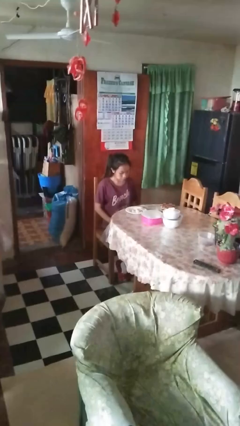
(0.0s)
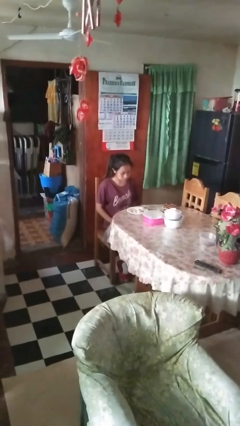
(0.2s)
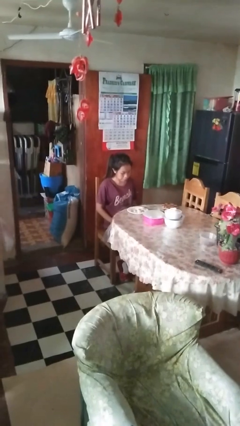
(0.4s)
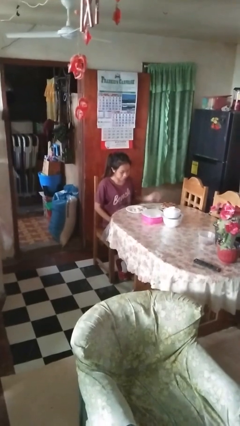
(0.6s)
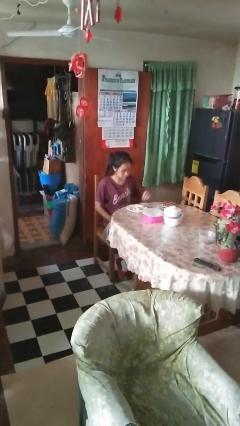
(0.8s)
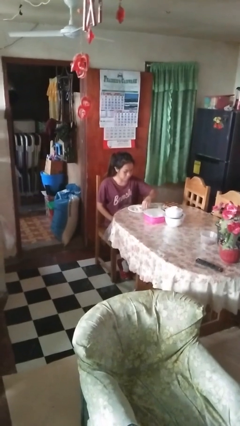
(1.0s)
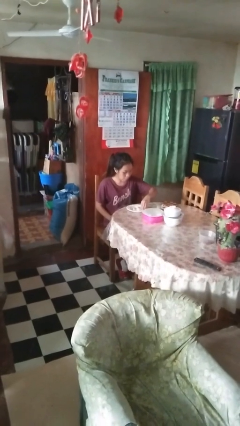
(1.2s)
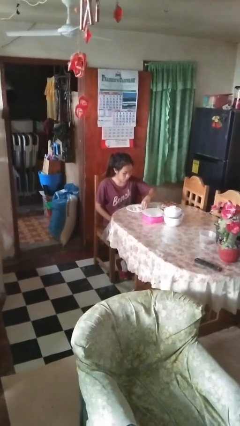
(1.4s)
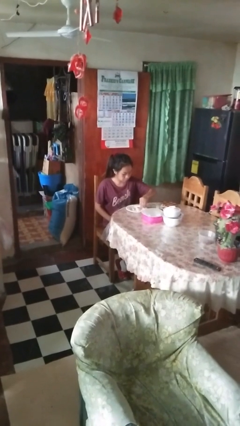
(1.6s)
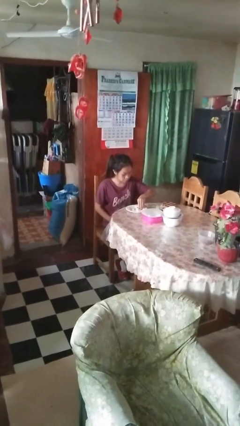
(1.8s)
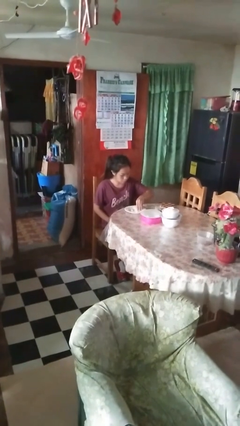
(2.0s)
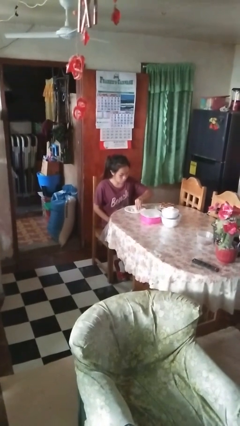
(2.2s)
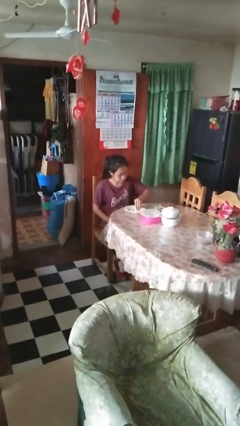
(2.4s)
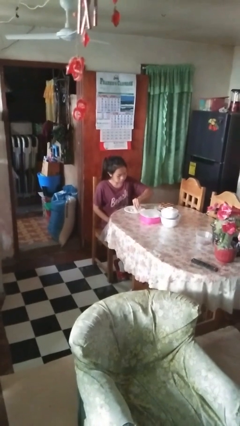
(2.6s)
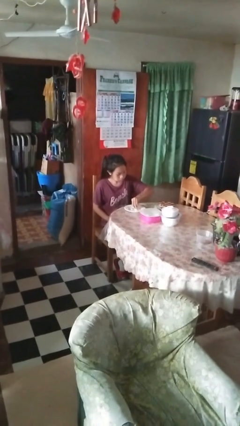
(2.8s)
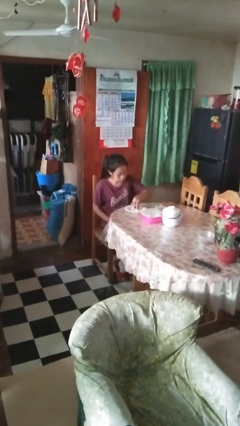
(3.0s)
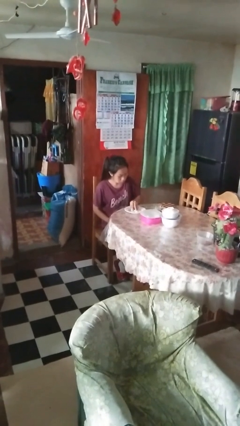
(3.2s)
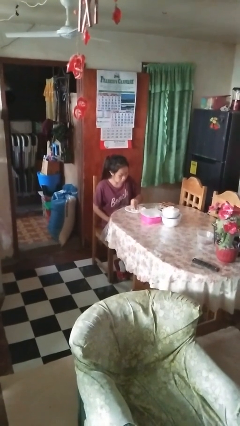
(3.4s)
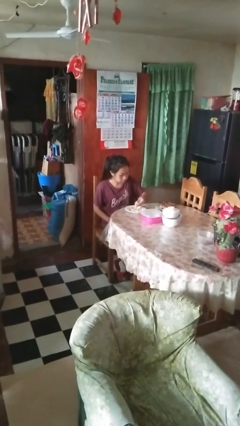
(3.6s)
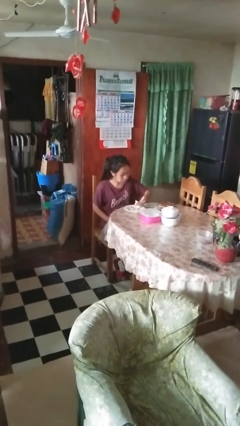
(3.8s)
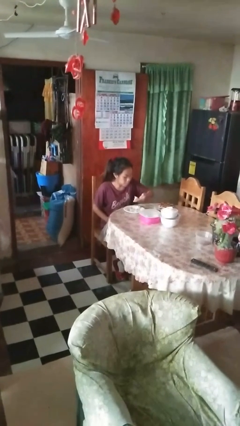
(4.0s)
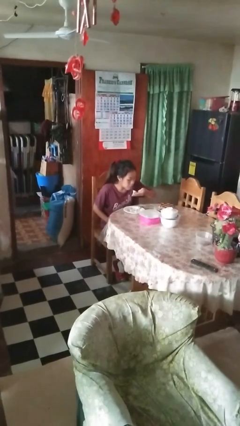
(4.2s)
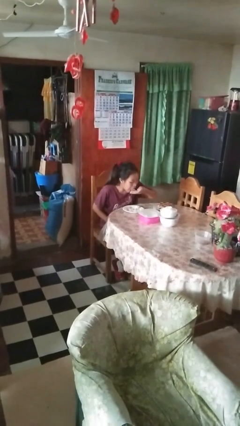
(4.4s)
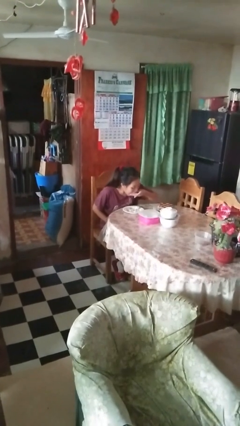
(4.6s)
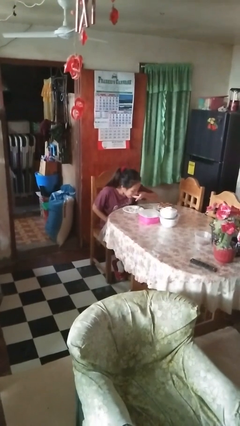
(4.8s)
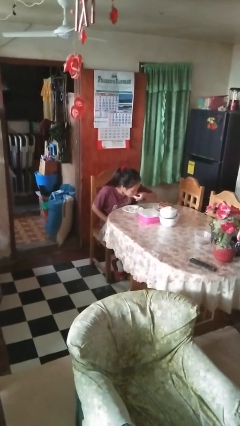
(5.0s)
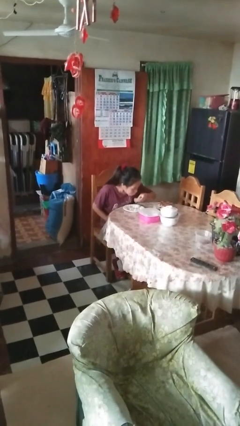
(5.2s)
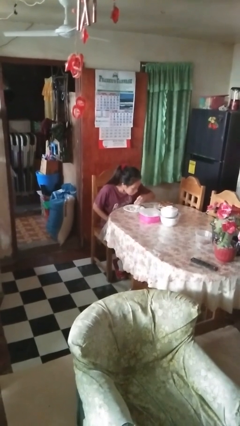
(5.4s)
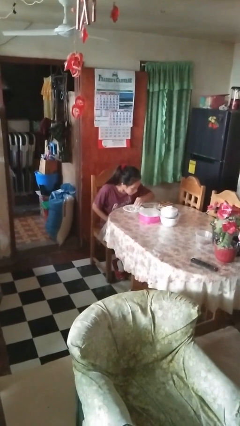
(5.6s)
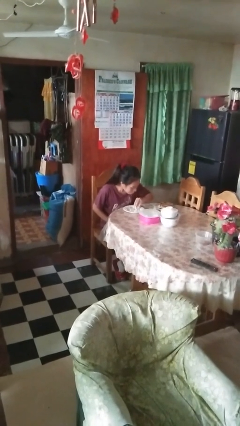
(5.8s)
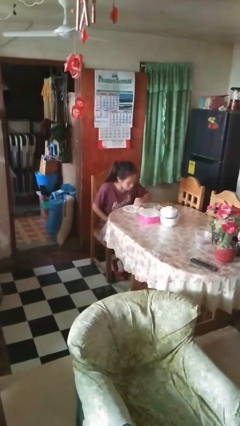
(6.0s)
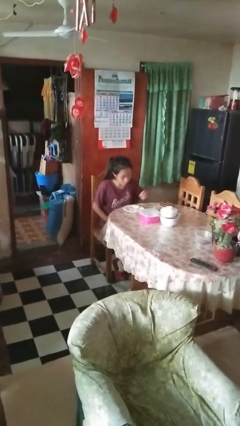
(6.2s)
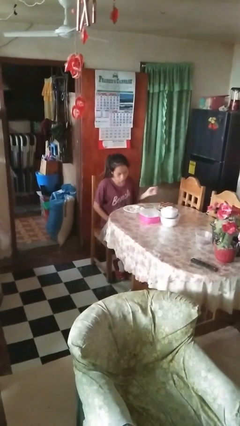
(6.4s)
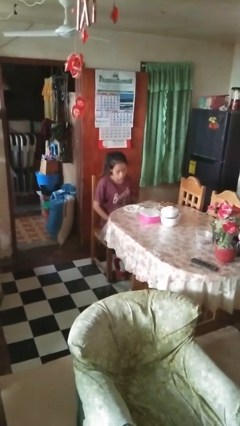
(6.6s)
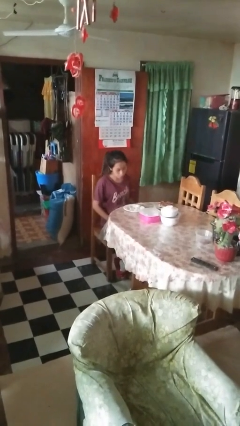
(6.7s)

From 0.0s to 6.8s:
person eats with hands

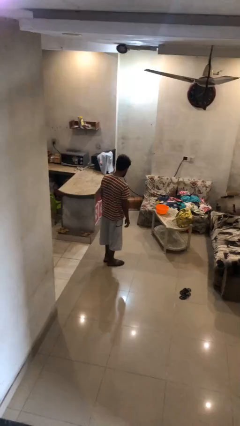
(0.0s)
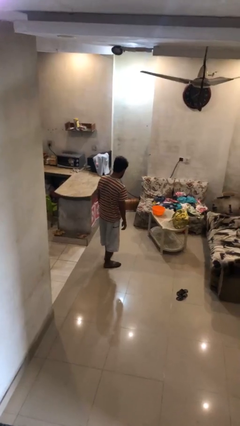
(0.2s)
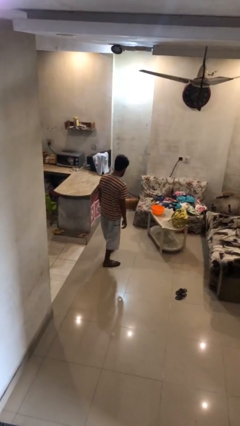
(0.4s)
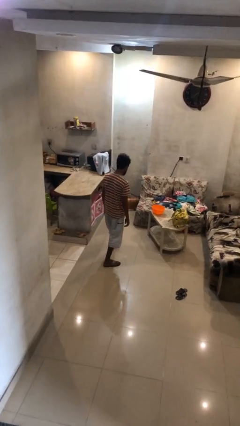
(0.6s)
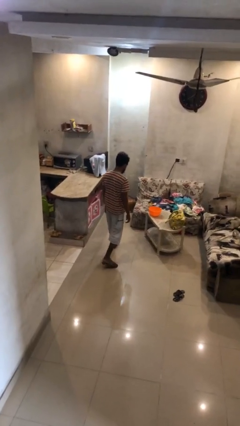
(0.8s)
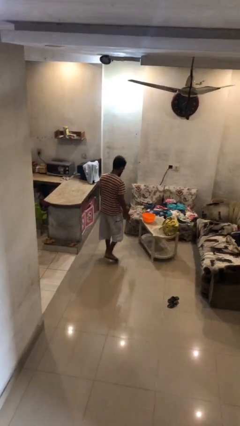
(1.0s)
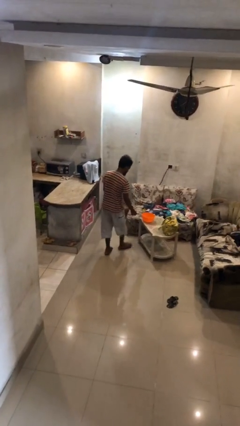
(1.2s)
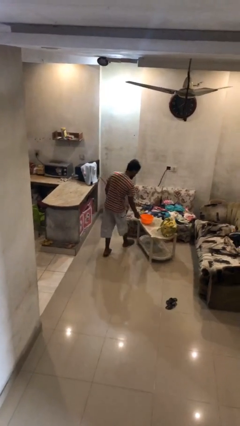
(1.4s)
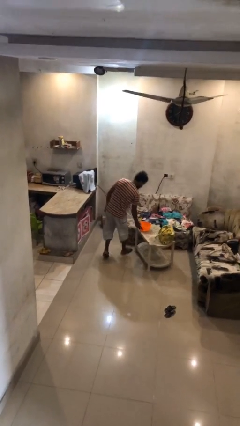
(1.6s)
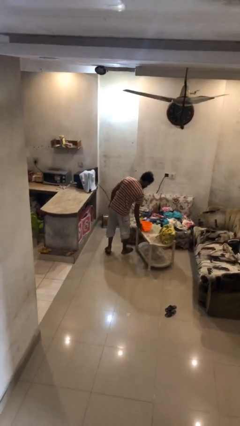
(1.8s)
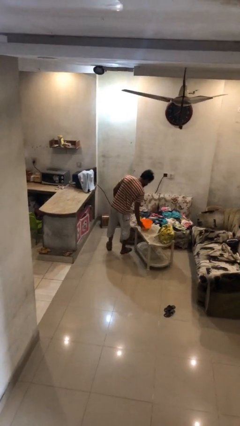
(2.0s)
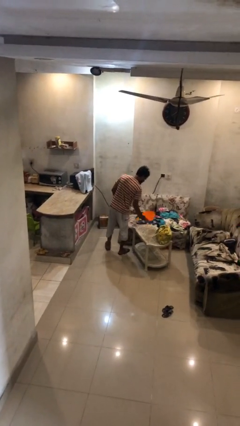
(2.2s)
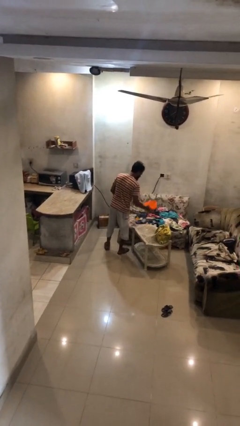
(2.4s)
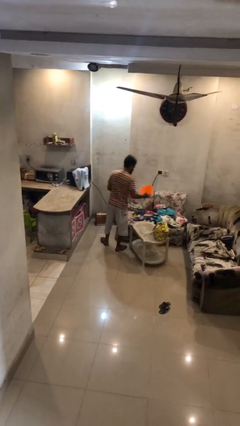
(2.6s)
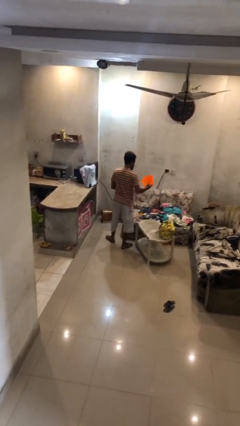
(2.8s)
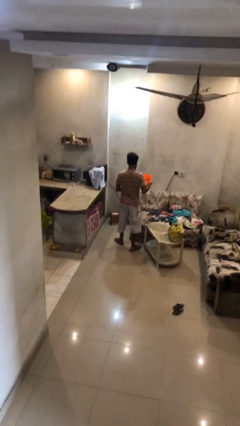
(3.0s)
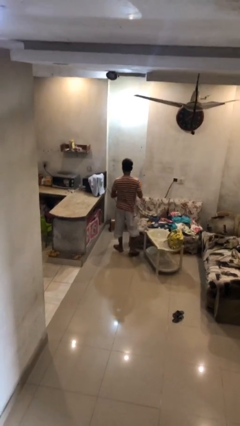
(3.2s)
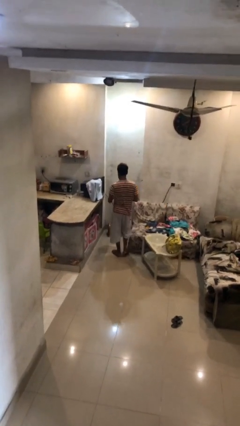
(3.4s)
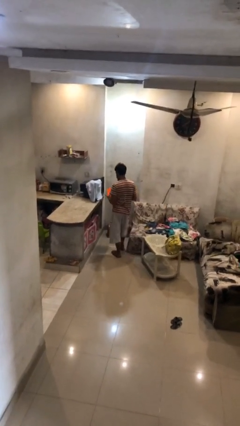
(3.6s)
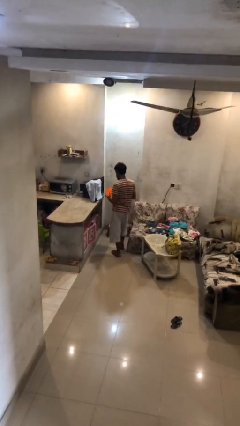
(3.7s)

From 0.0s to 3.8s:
person picks up object from table

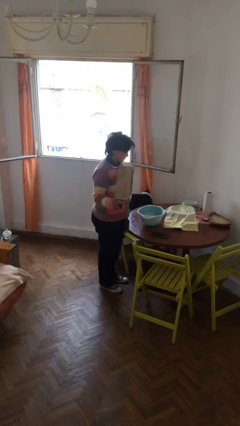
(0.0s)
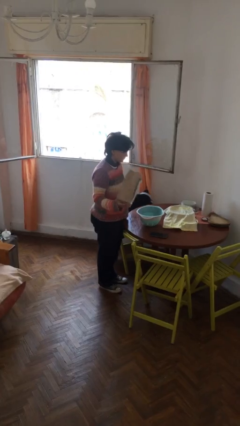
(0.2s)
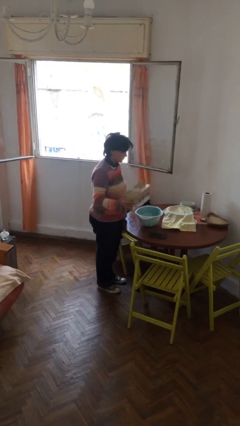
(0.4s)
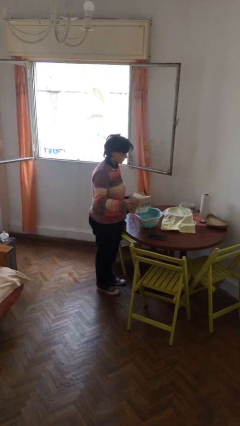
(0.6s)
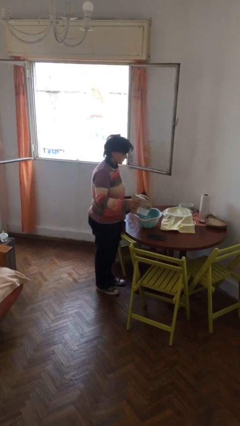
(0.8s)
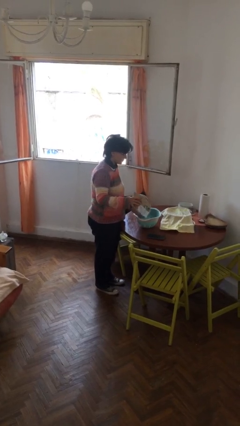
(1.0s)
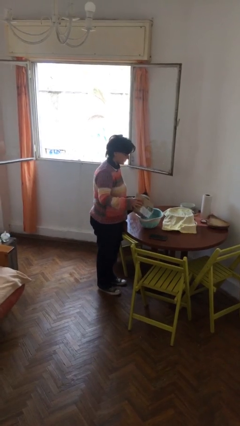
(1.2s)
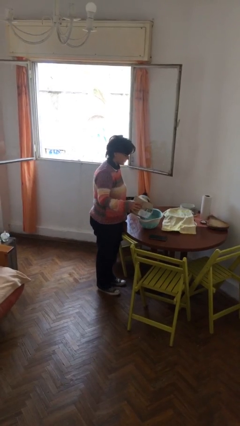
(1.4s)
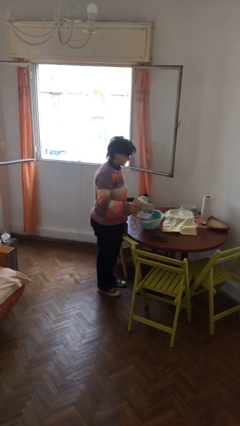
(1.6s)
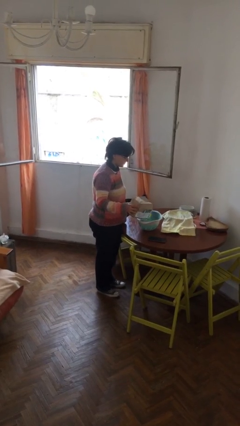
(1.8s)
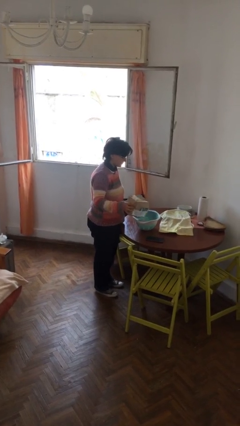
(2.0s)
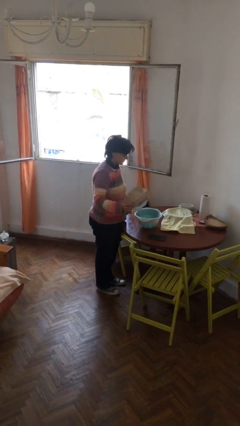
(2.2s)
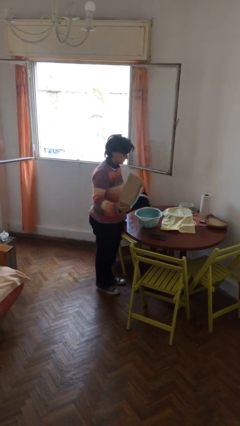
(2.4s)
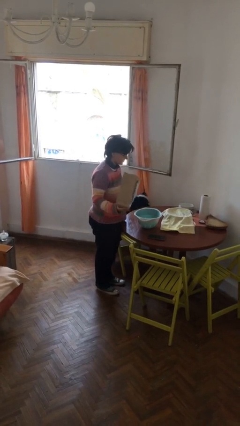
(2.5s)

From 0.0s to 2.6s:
person pours into bowl

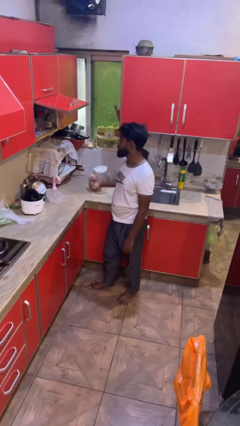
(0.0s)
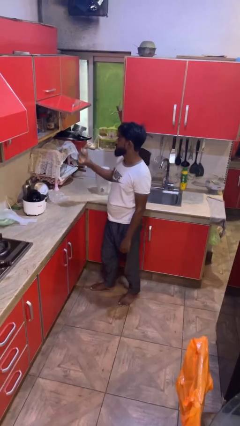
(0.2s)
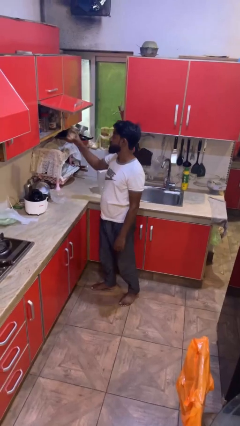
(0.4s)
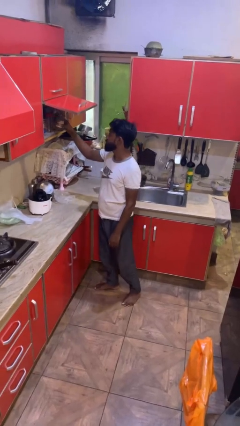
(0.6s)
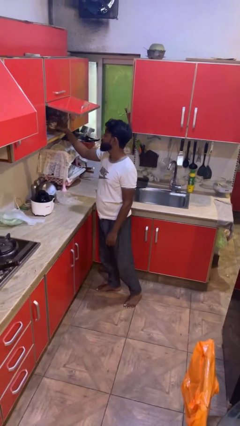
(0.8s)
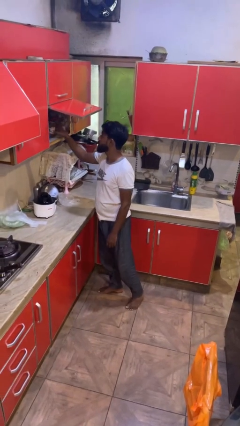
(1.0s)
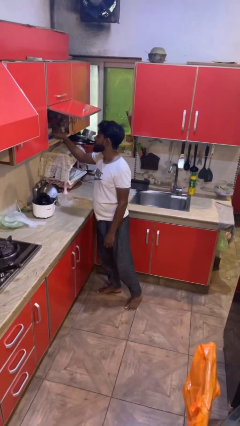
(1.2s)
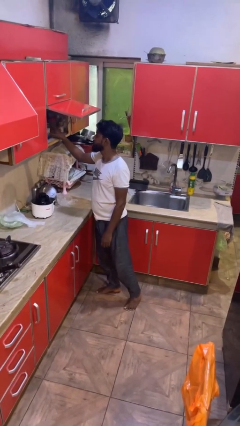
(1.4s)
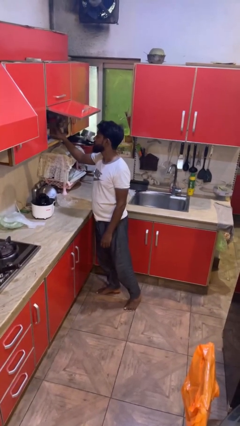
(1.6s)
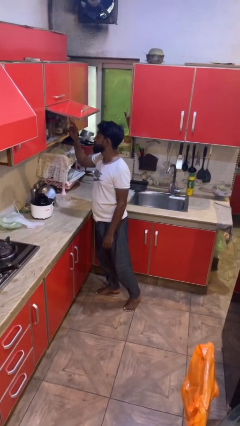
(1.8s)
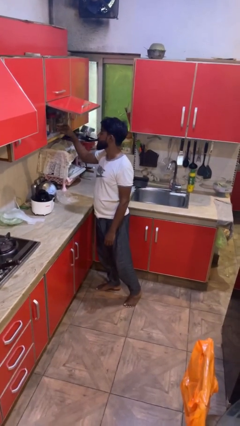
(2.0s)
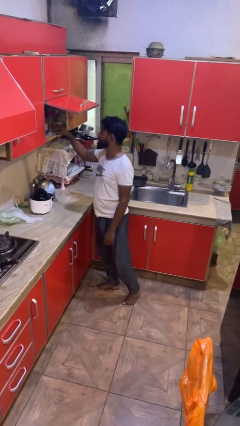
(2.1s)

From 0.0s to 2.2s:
person puts down object into cabinet

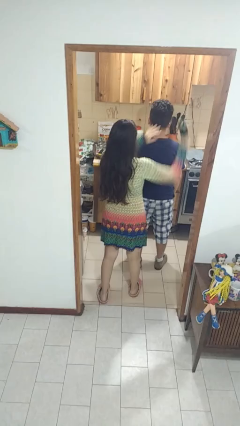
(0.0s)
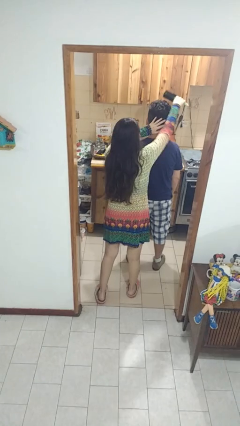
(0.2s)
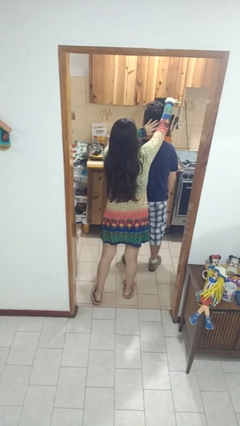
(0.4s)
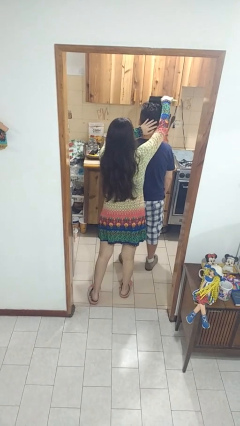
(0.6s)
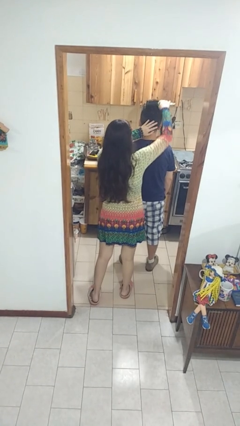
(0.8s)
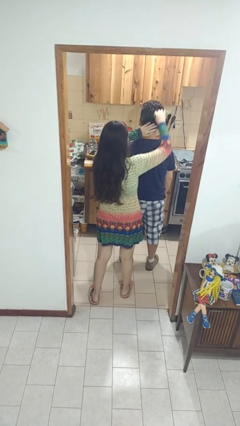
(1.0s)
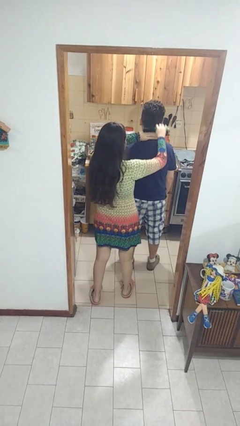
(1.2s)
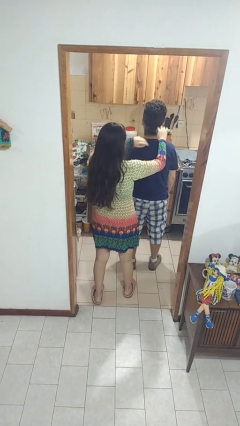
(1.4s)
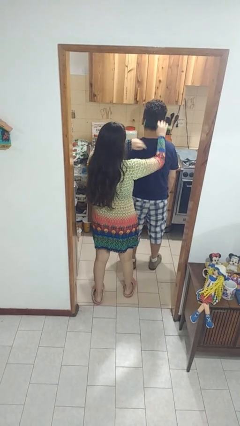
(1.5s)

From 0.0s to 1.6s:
person brushes hair of person

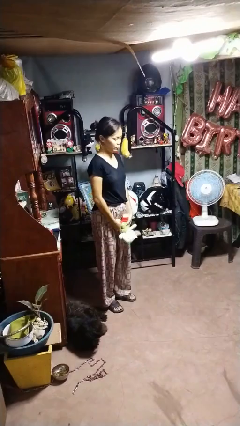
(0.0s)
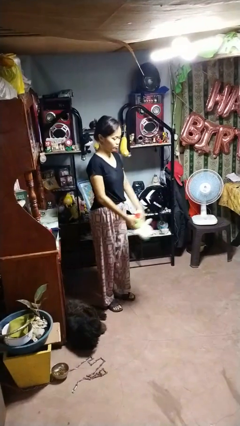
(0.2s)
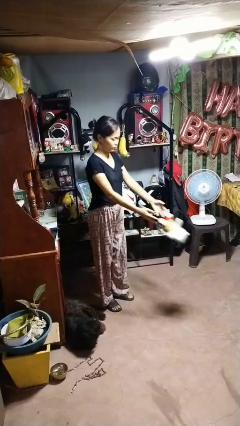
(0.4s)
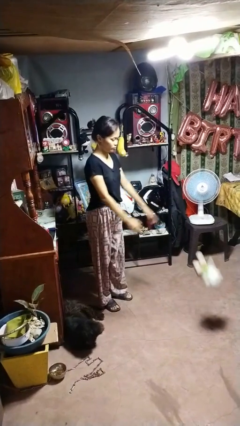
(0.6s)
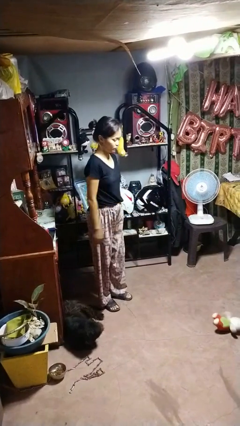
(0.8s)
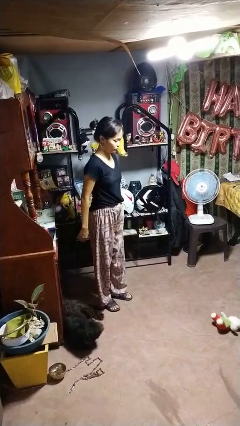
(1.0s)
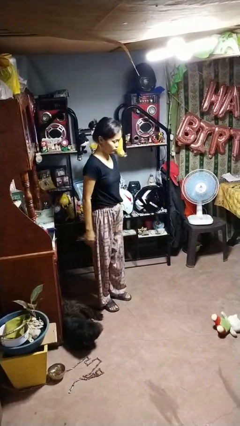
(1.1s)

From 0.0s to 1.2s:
person throws object to ground
